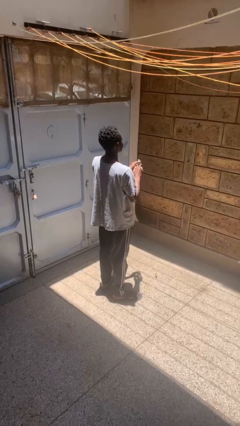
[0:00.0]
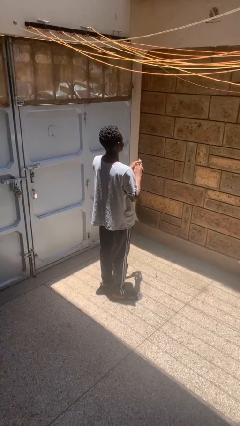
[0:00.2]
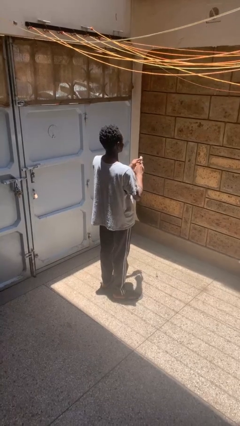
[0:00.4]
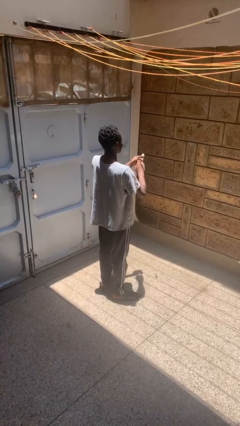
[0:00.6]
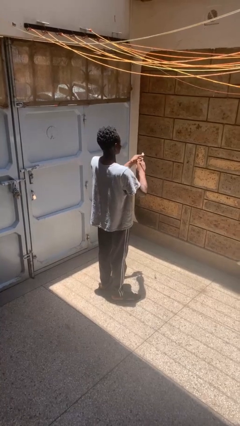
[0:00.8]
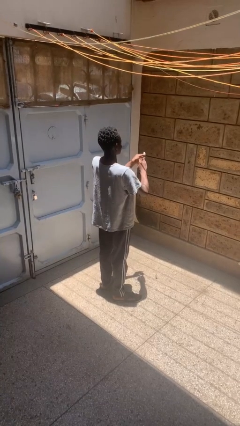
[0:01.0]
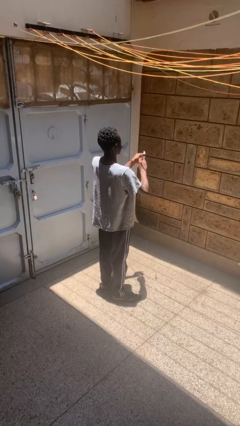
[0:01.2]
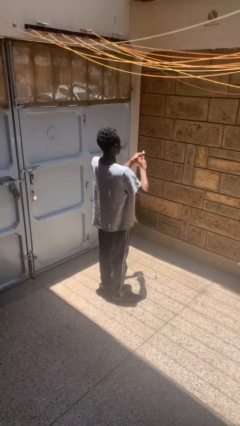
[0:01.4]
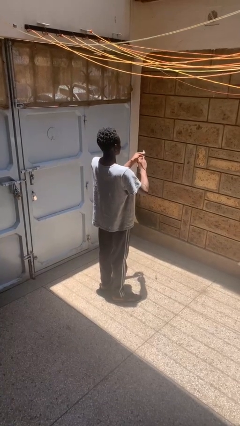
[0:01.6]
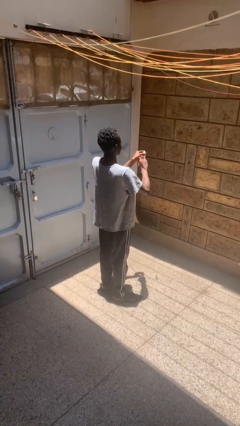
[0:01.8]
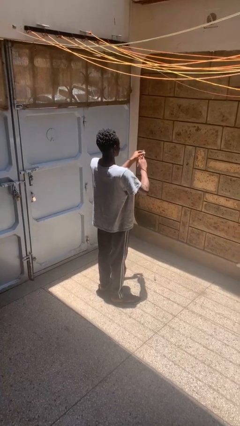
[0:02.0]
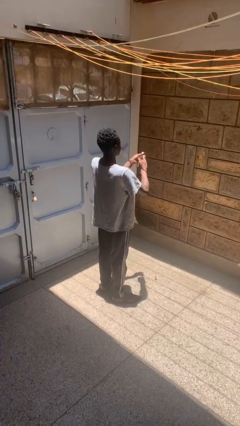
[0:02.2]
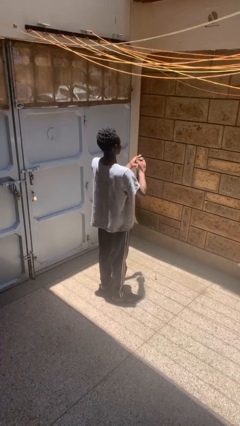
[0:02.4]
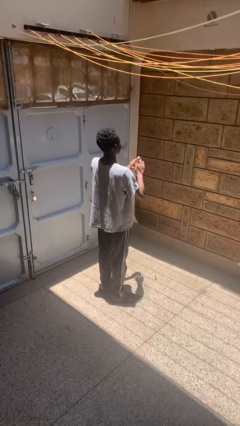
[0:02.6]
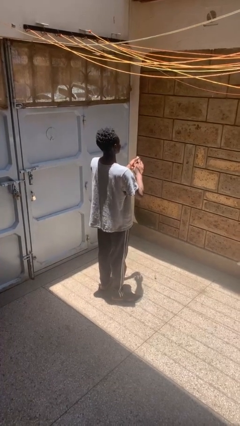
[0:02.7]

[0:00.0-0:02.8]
person clips fingernails

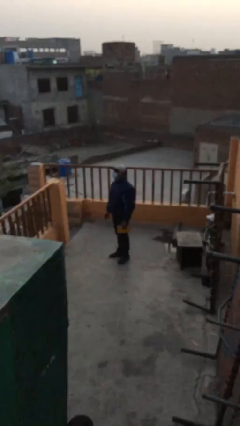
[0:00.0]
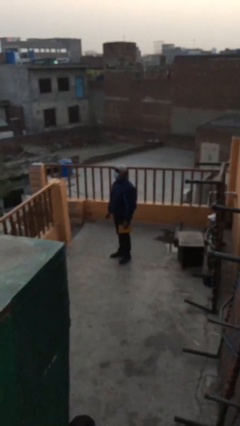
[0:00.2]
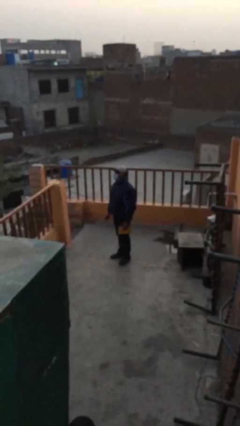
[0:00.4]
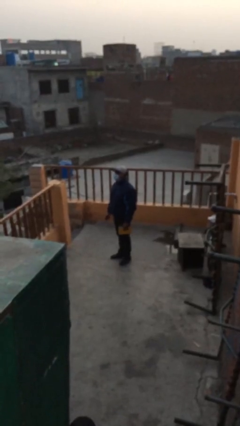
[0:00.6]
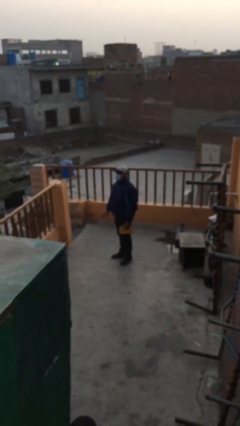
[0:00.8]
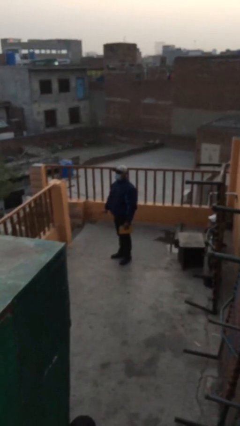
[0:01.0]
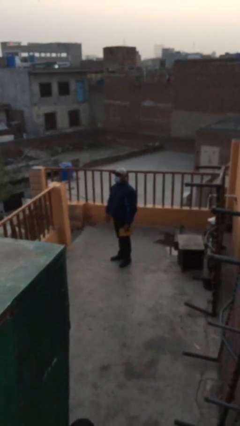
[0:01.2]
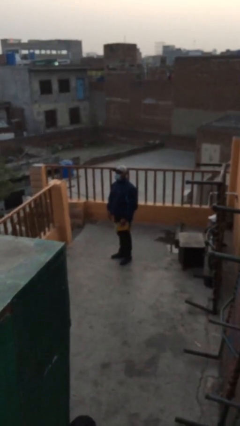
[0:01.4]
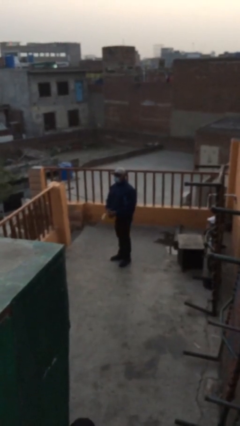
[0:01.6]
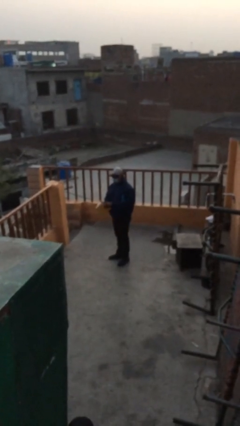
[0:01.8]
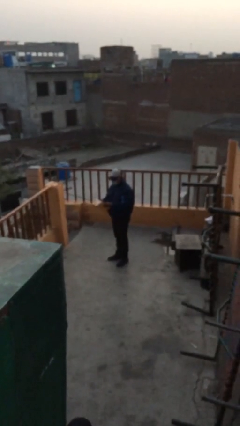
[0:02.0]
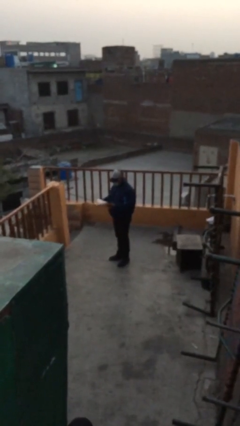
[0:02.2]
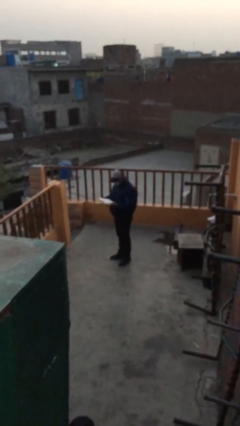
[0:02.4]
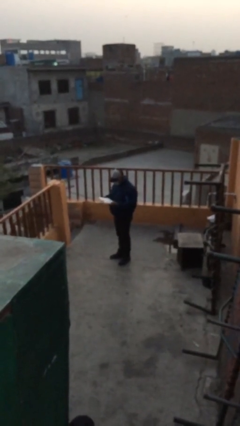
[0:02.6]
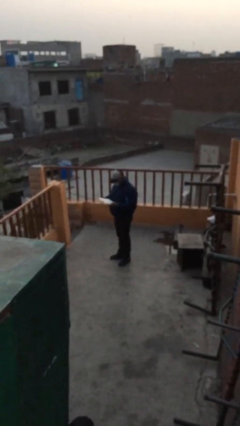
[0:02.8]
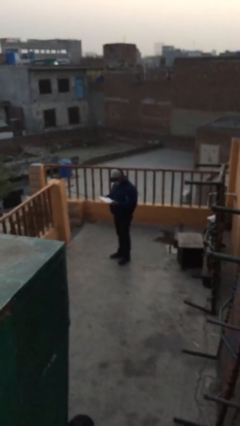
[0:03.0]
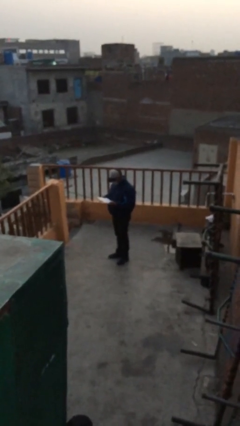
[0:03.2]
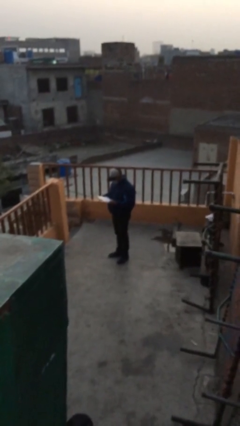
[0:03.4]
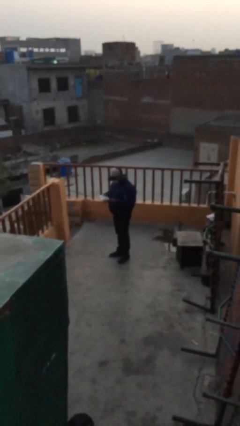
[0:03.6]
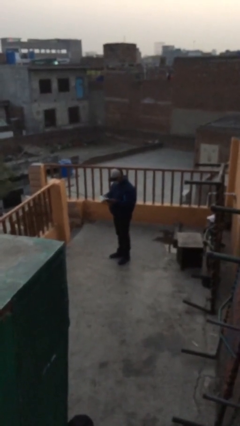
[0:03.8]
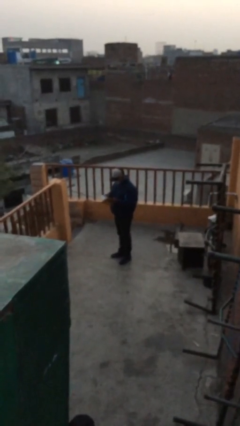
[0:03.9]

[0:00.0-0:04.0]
person reads document

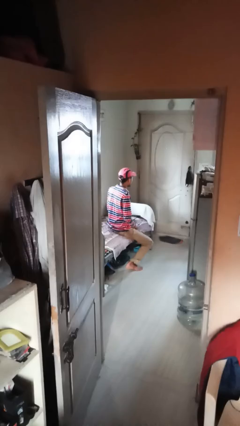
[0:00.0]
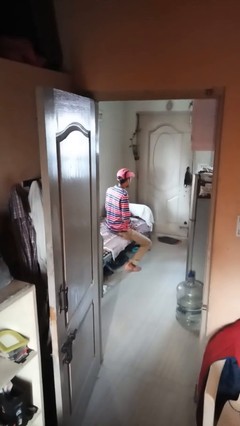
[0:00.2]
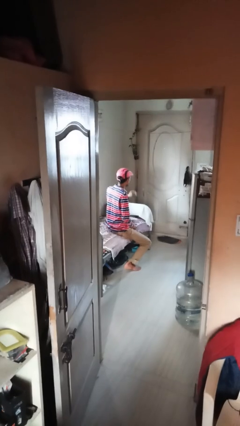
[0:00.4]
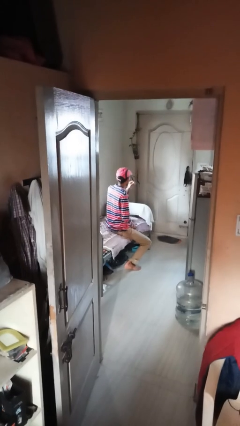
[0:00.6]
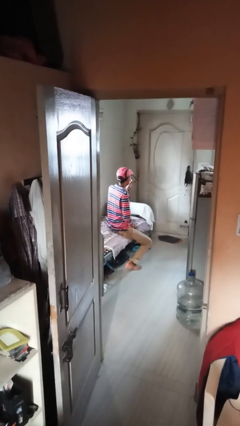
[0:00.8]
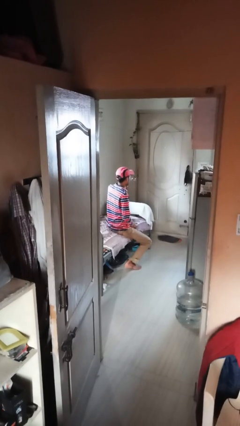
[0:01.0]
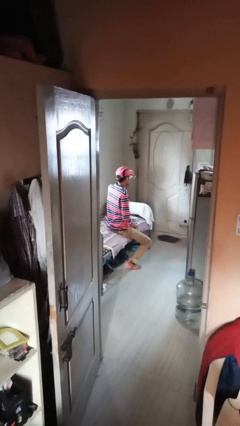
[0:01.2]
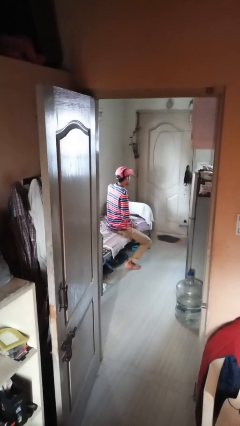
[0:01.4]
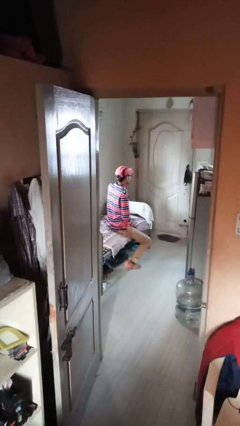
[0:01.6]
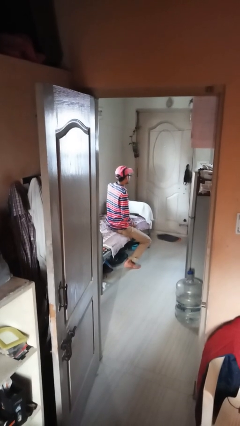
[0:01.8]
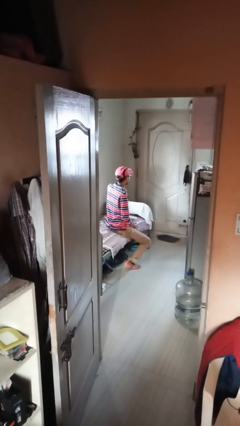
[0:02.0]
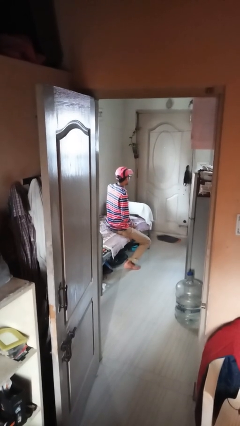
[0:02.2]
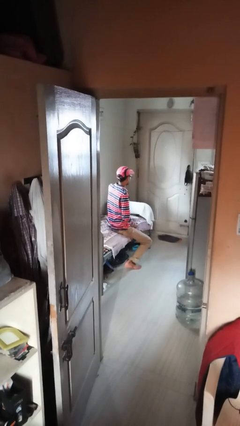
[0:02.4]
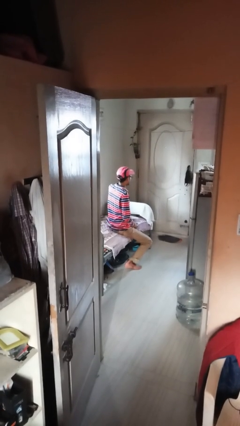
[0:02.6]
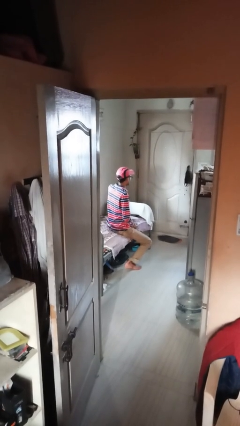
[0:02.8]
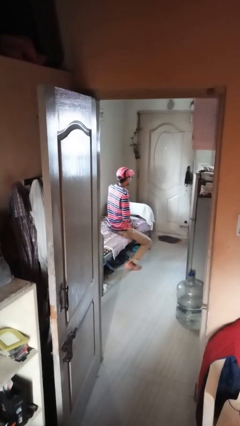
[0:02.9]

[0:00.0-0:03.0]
person puts on glasses

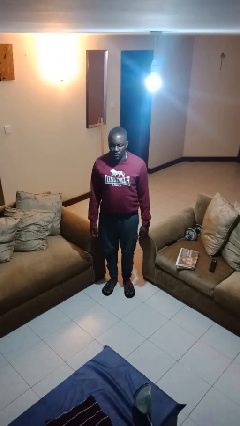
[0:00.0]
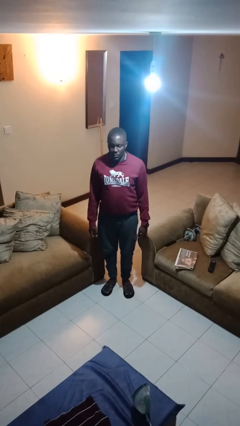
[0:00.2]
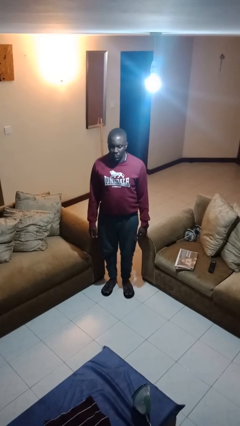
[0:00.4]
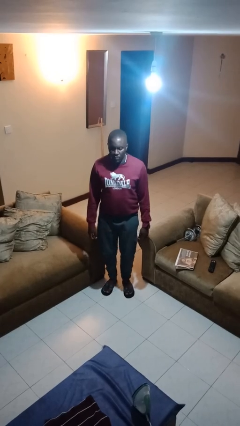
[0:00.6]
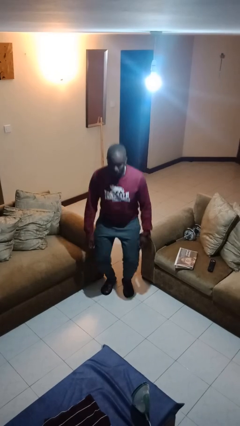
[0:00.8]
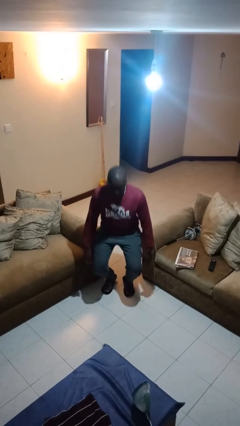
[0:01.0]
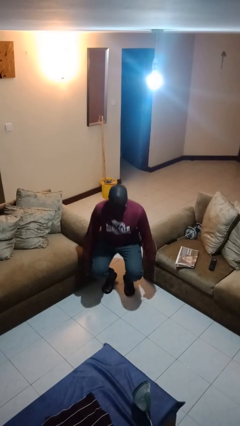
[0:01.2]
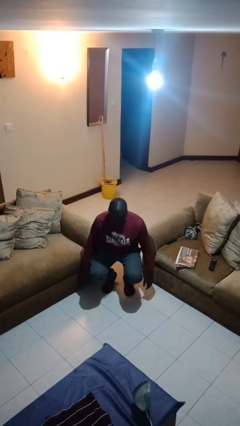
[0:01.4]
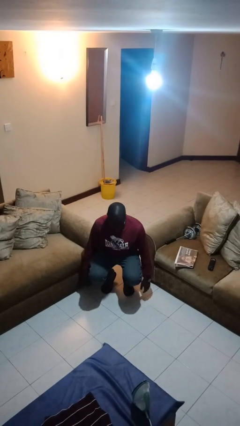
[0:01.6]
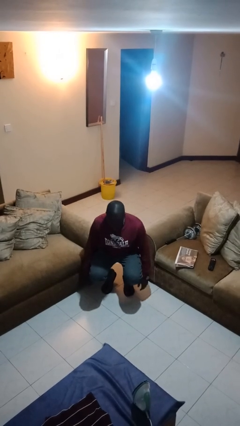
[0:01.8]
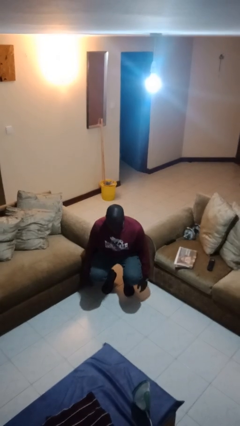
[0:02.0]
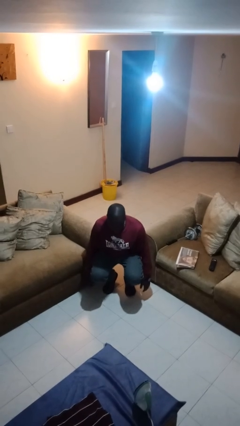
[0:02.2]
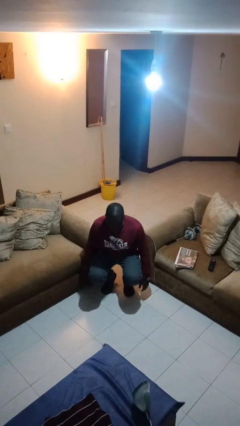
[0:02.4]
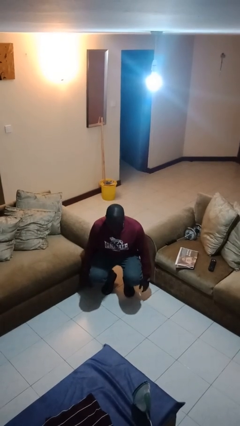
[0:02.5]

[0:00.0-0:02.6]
person squats

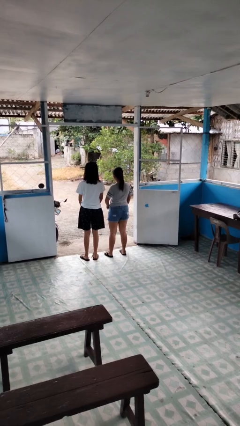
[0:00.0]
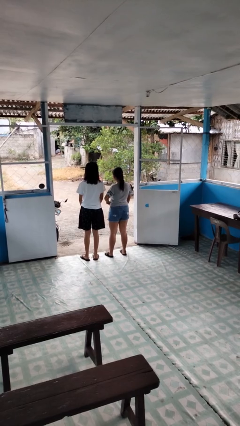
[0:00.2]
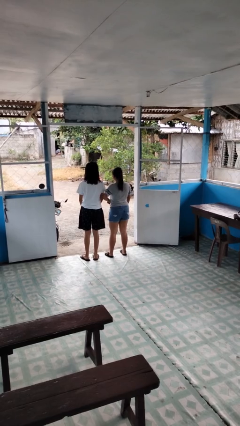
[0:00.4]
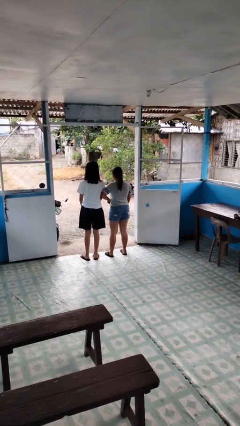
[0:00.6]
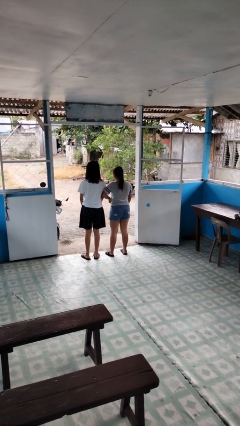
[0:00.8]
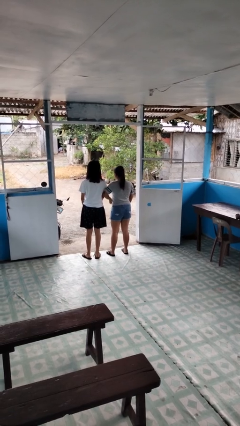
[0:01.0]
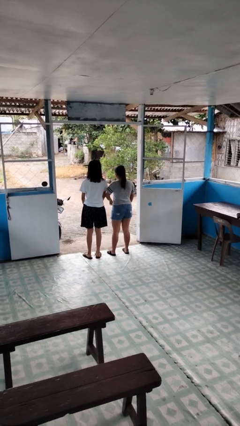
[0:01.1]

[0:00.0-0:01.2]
person nudges person with elbow

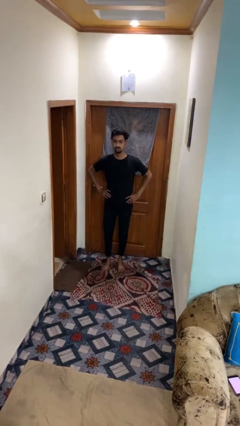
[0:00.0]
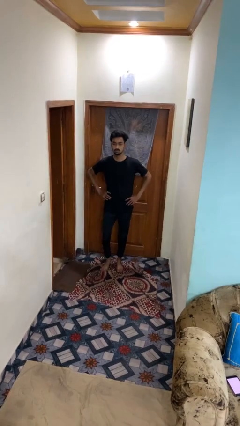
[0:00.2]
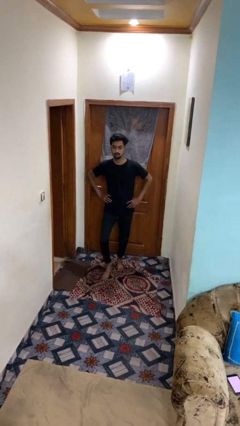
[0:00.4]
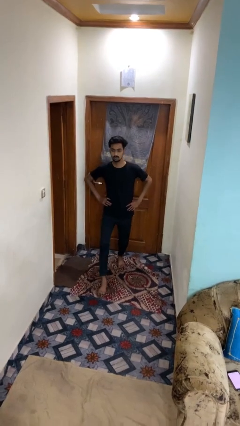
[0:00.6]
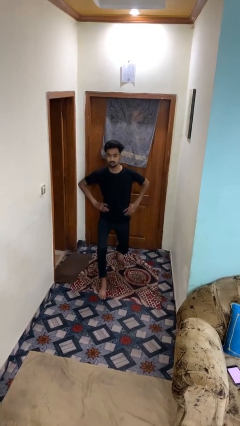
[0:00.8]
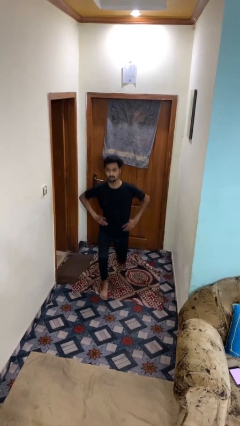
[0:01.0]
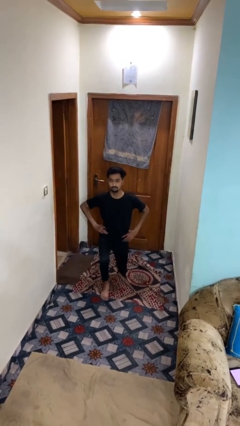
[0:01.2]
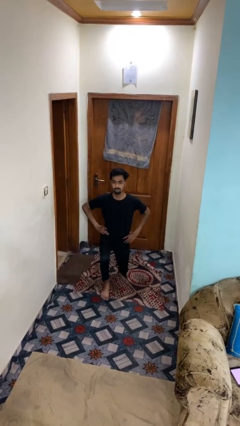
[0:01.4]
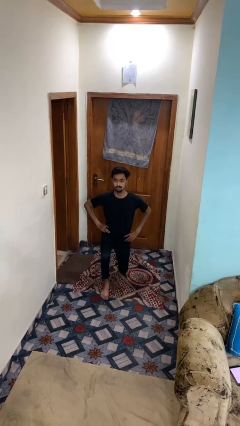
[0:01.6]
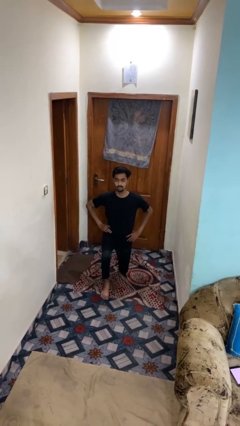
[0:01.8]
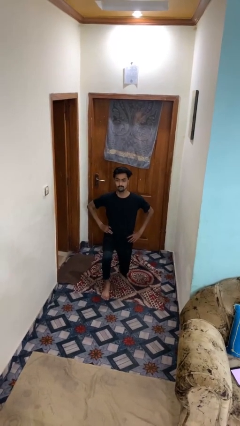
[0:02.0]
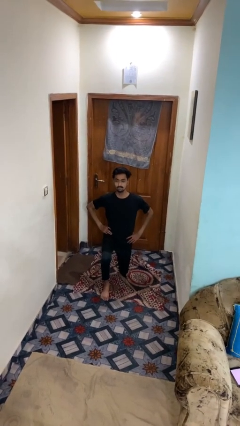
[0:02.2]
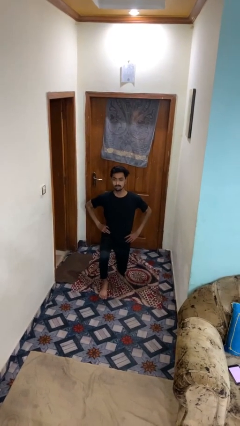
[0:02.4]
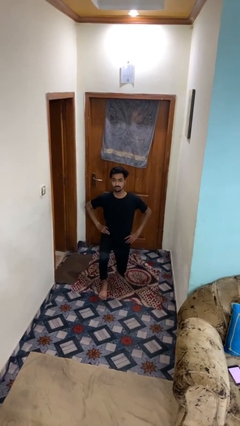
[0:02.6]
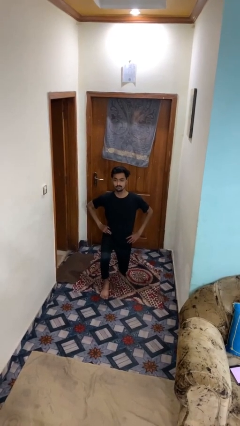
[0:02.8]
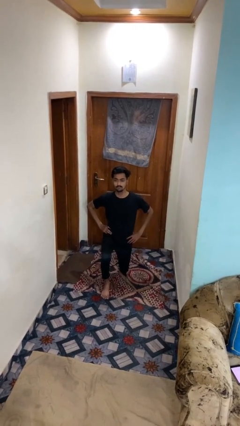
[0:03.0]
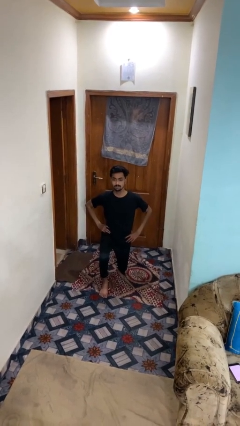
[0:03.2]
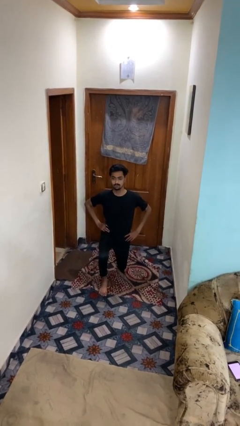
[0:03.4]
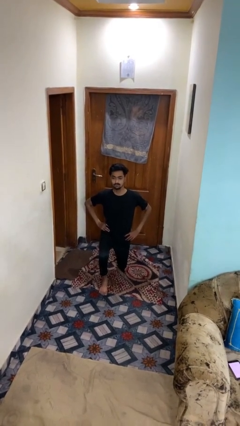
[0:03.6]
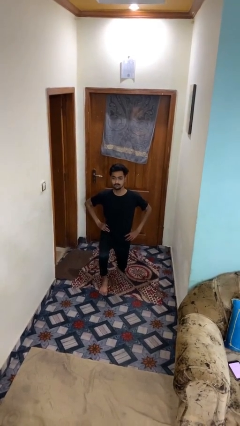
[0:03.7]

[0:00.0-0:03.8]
person exercises with lunges

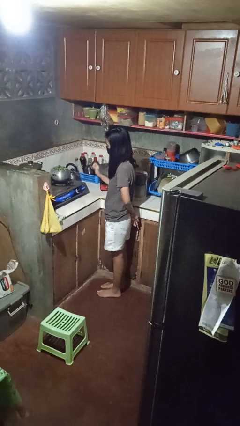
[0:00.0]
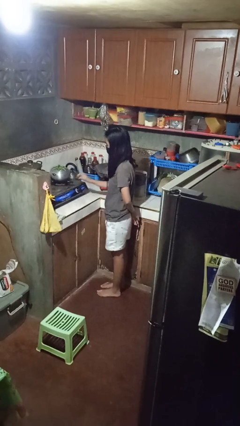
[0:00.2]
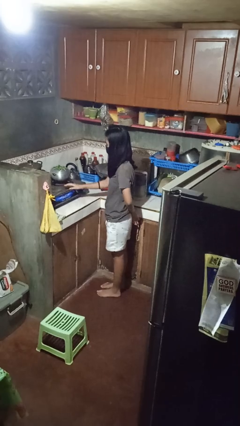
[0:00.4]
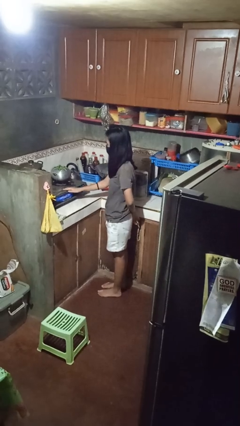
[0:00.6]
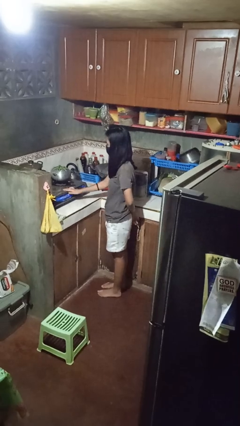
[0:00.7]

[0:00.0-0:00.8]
person burns hand
